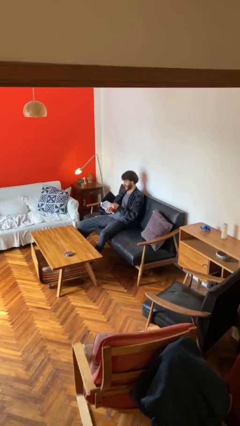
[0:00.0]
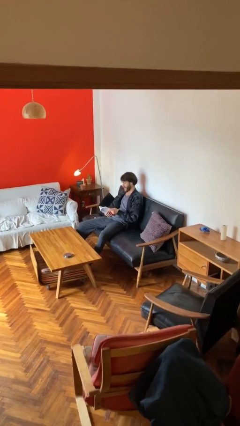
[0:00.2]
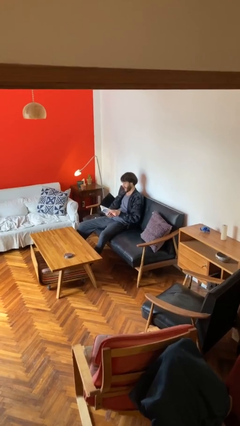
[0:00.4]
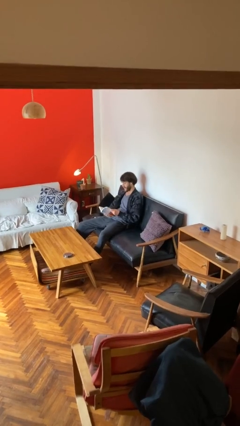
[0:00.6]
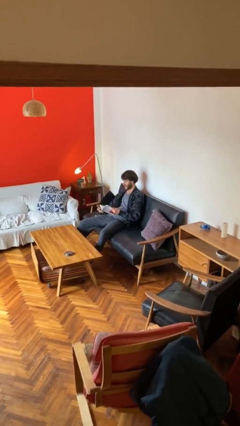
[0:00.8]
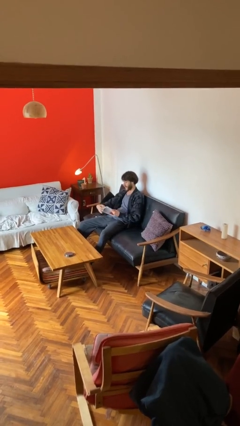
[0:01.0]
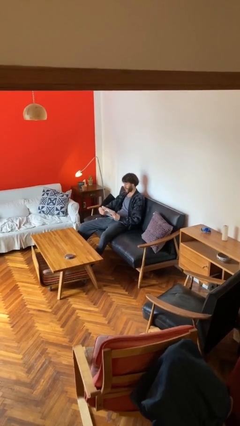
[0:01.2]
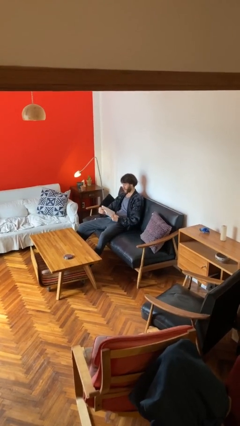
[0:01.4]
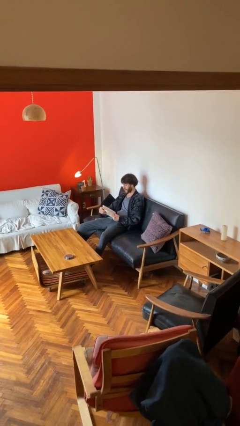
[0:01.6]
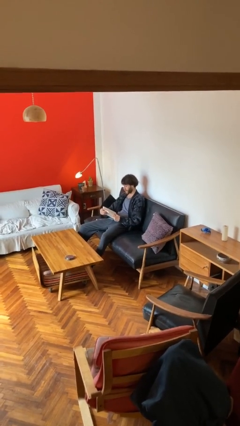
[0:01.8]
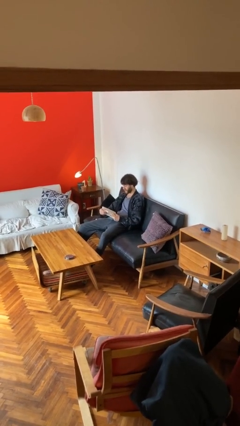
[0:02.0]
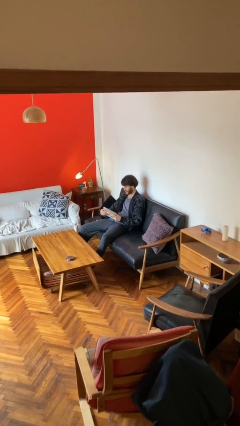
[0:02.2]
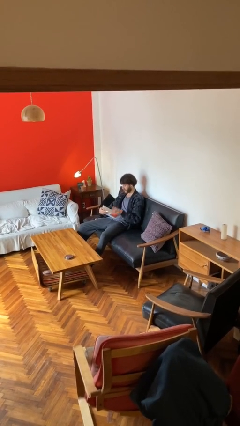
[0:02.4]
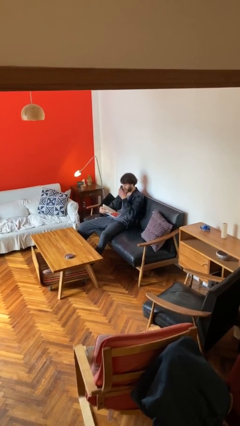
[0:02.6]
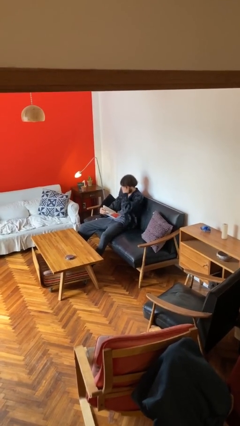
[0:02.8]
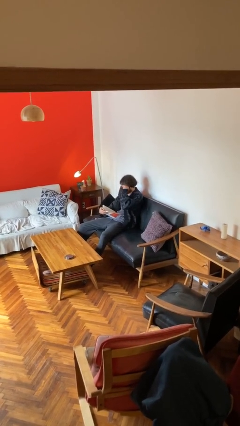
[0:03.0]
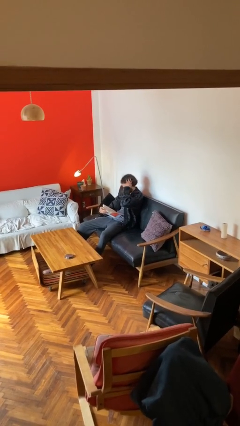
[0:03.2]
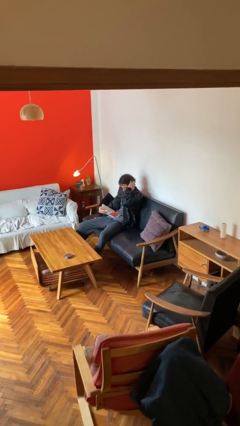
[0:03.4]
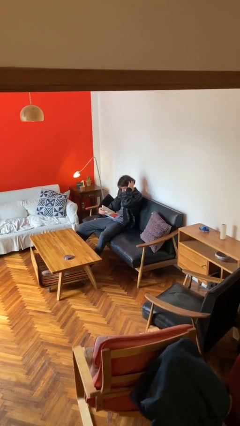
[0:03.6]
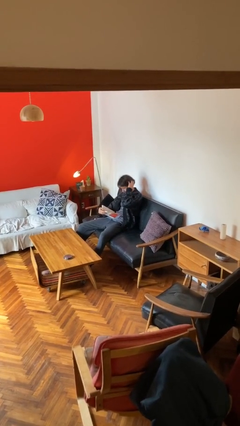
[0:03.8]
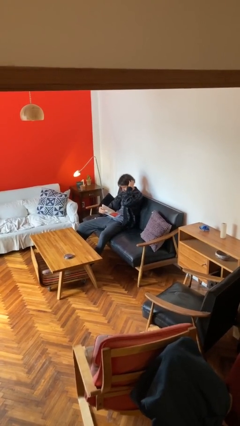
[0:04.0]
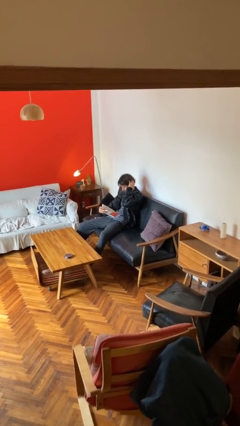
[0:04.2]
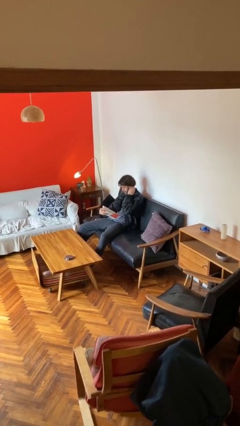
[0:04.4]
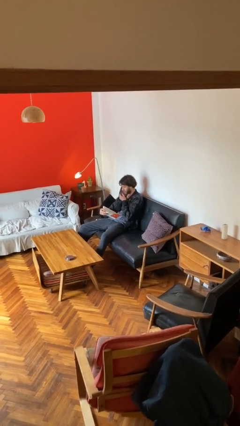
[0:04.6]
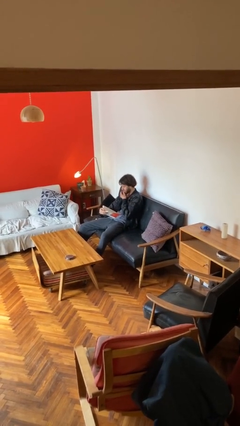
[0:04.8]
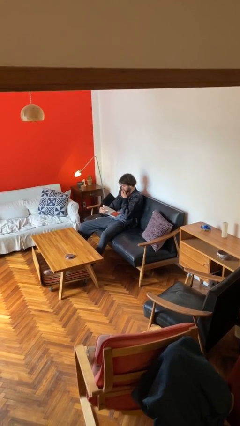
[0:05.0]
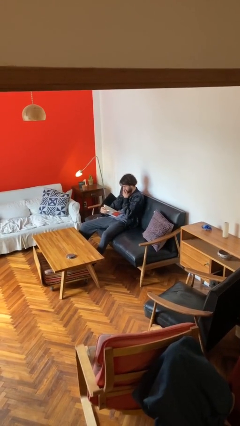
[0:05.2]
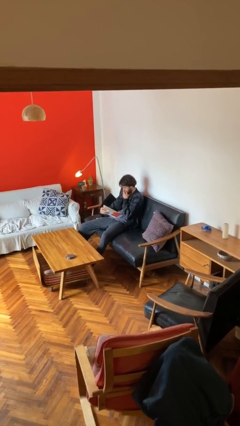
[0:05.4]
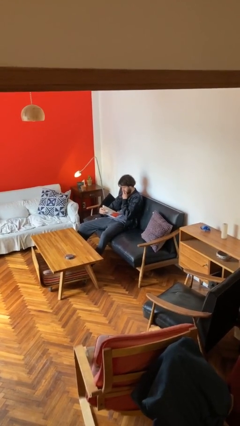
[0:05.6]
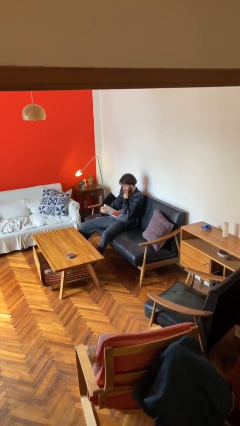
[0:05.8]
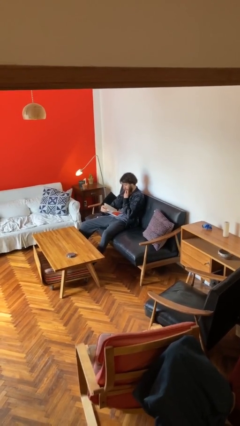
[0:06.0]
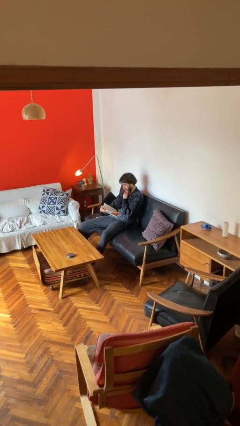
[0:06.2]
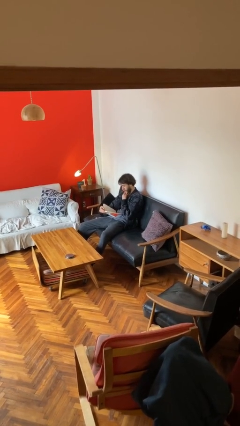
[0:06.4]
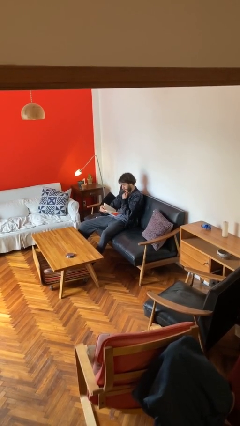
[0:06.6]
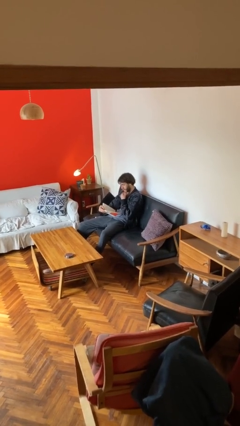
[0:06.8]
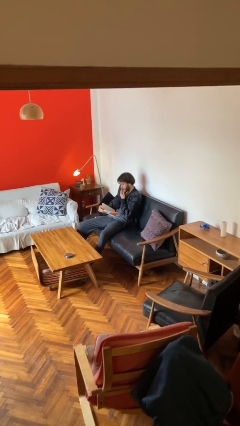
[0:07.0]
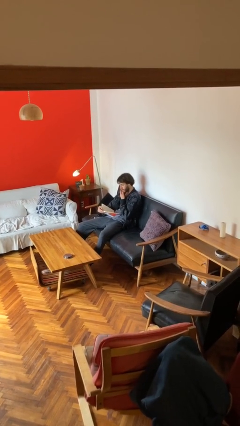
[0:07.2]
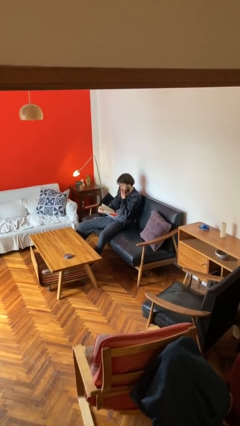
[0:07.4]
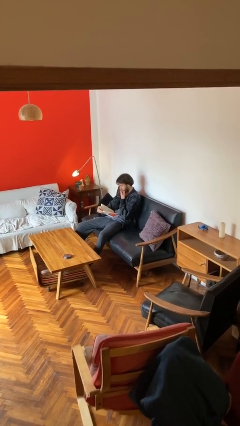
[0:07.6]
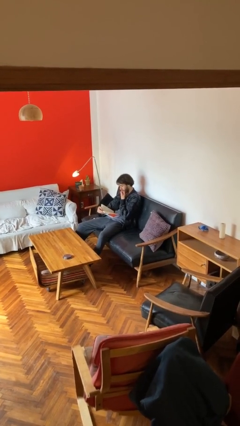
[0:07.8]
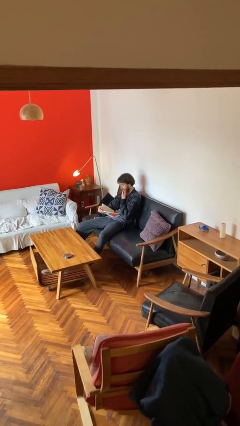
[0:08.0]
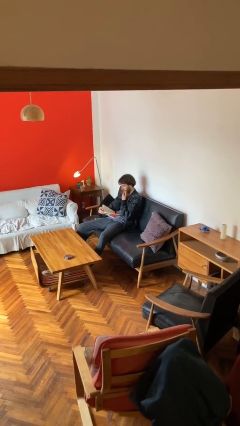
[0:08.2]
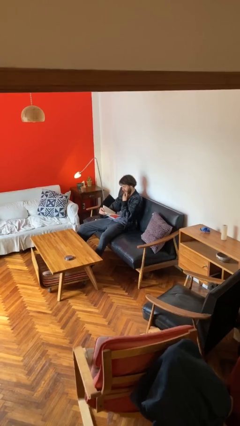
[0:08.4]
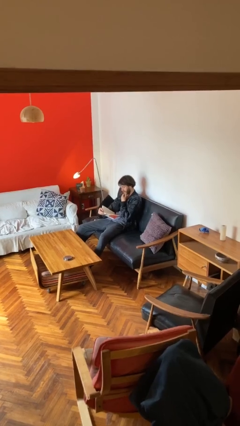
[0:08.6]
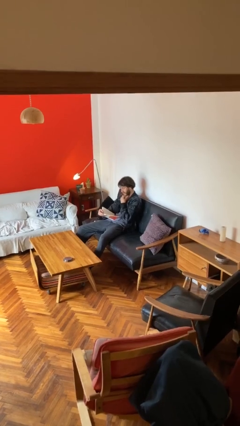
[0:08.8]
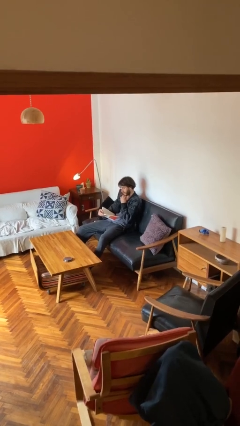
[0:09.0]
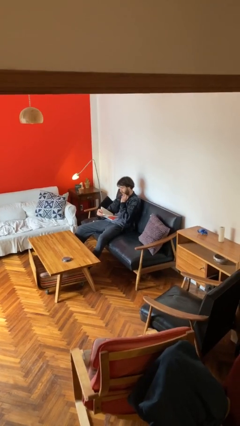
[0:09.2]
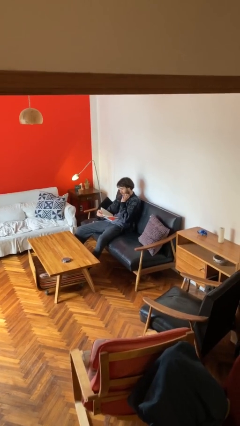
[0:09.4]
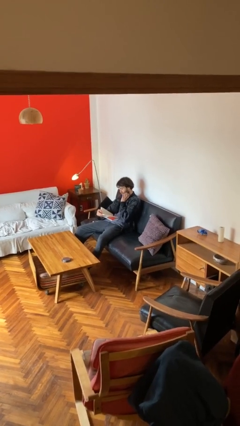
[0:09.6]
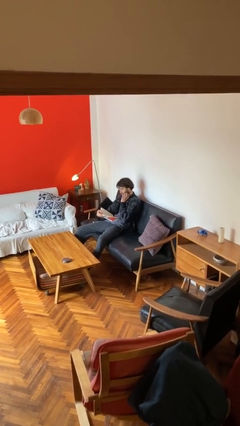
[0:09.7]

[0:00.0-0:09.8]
person reads document

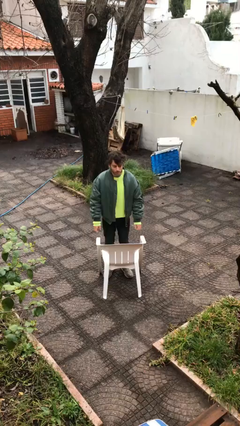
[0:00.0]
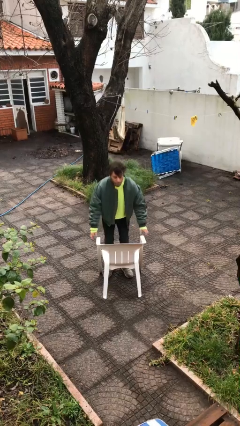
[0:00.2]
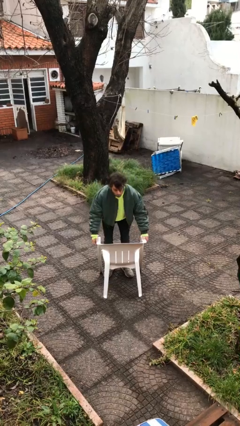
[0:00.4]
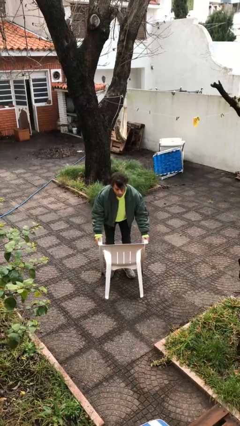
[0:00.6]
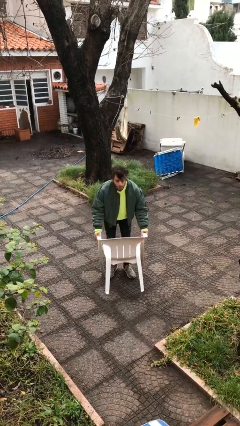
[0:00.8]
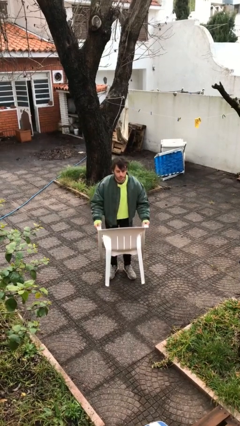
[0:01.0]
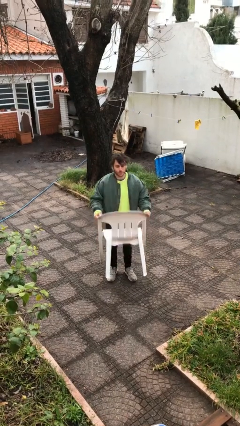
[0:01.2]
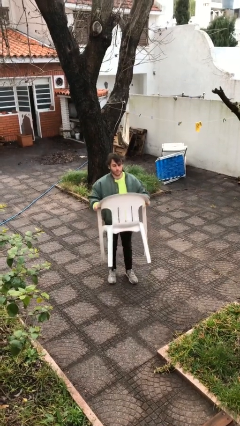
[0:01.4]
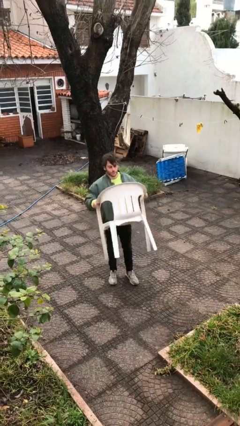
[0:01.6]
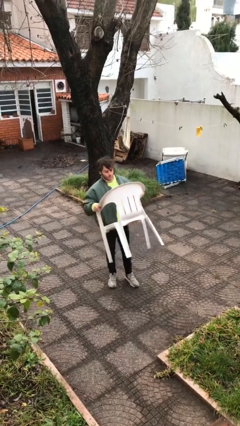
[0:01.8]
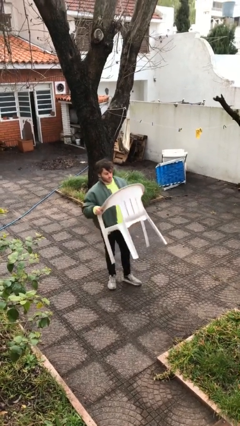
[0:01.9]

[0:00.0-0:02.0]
person picks up object from floor

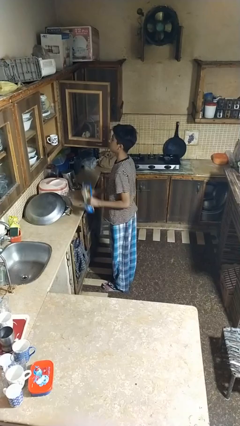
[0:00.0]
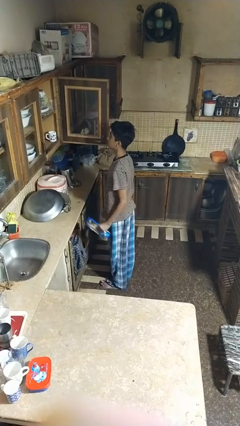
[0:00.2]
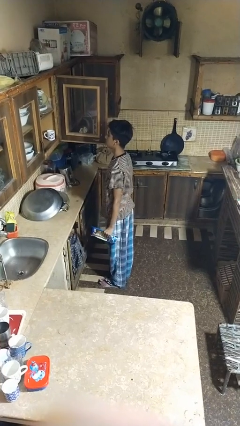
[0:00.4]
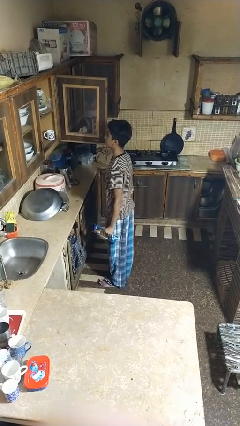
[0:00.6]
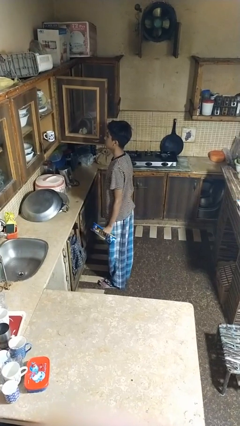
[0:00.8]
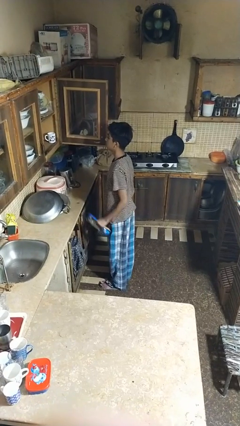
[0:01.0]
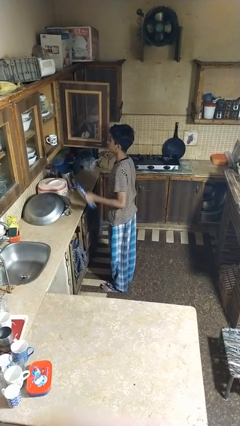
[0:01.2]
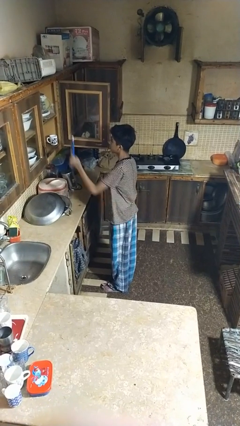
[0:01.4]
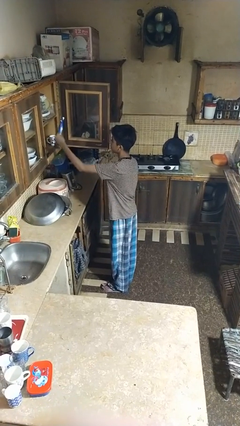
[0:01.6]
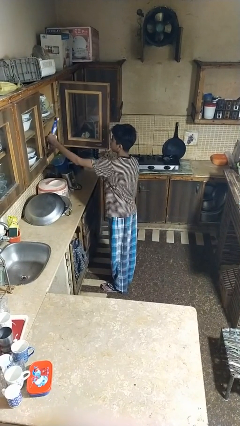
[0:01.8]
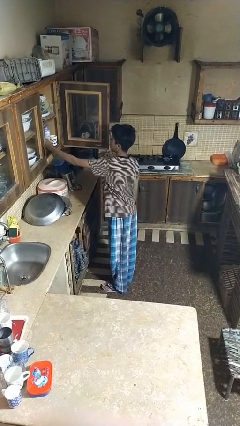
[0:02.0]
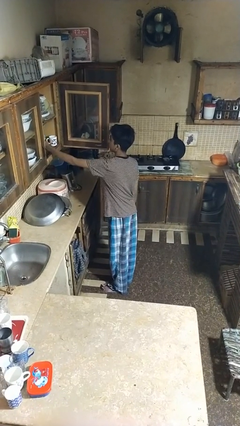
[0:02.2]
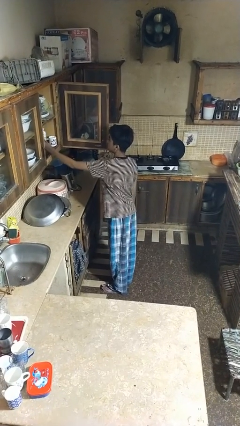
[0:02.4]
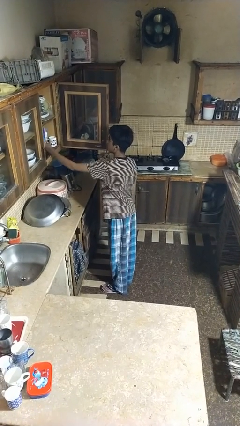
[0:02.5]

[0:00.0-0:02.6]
person puts object in cabinet

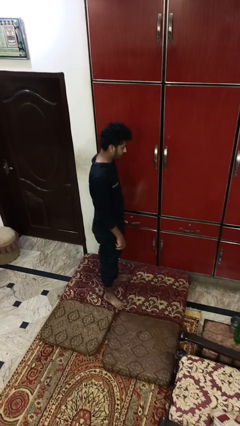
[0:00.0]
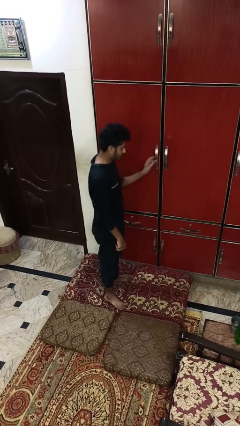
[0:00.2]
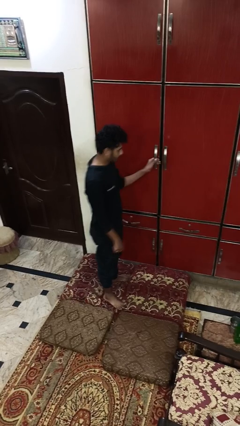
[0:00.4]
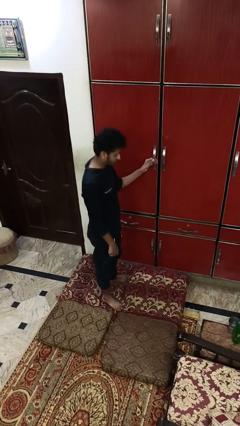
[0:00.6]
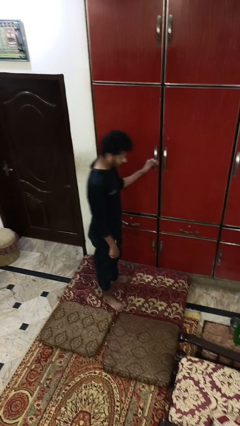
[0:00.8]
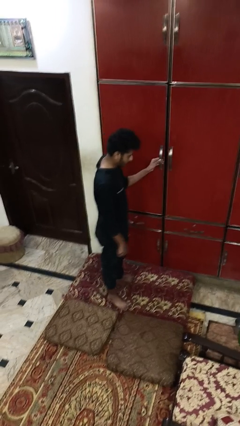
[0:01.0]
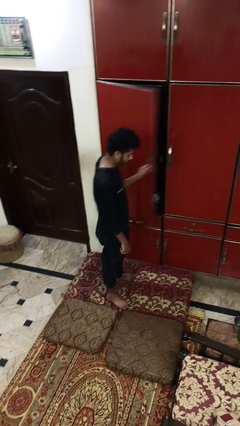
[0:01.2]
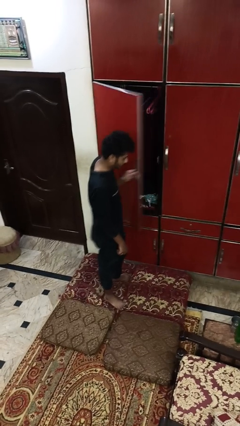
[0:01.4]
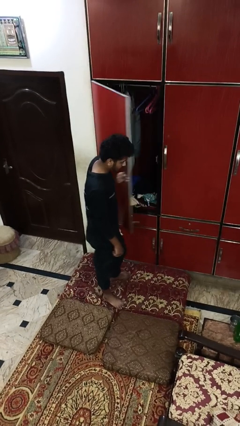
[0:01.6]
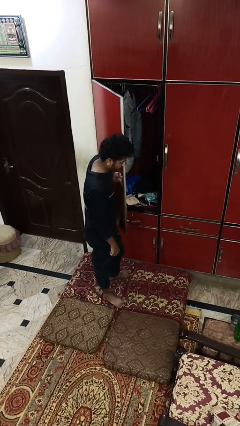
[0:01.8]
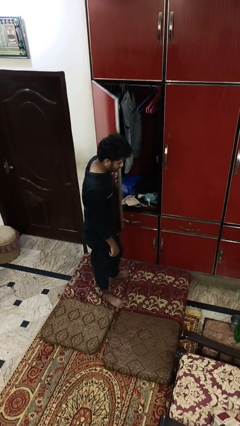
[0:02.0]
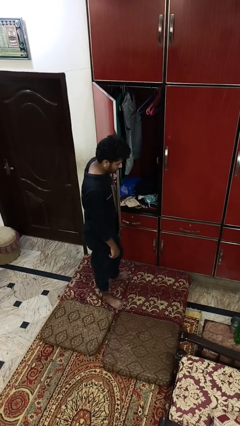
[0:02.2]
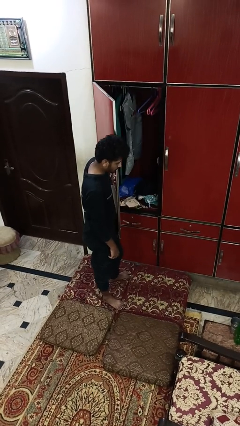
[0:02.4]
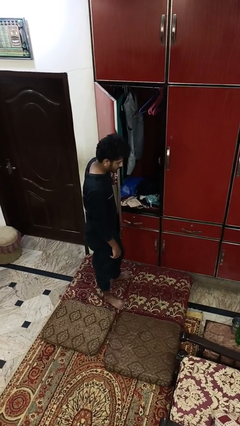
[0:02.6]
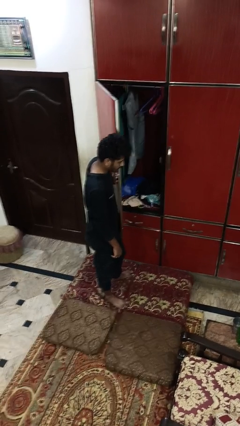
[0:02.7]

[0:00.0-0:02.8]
person opens closet door

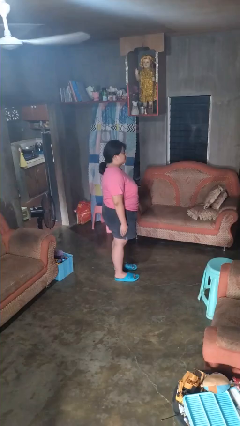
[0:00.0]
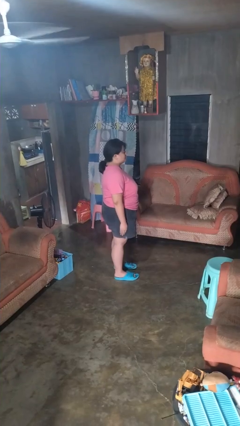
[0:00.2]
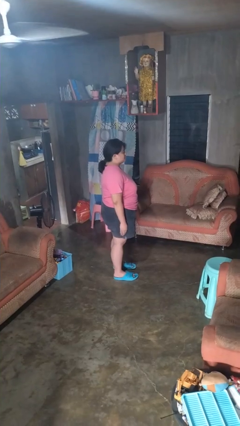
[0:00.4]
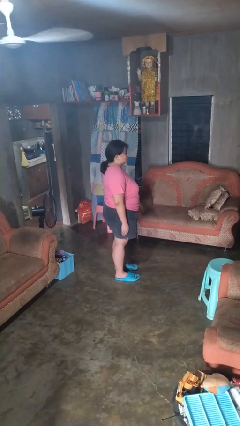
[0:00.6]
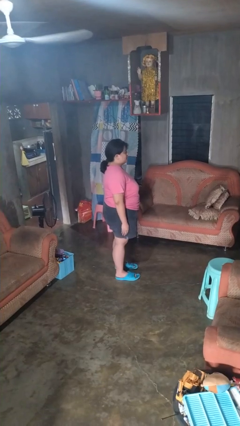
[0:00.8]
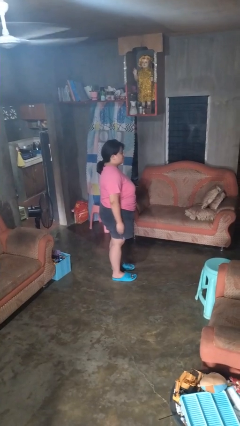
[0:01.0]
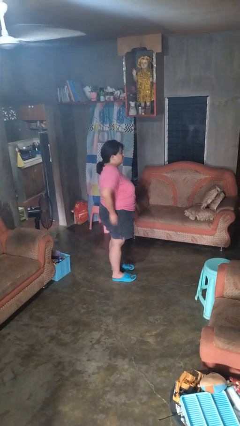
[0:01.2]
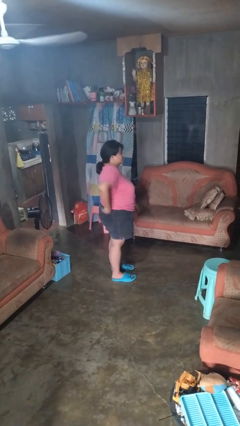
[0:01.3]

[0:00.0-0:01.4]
person puts hands in back pockets
